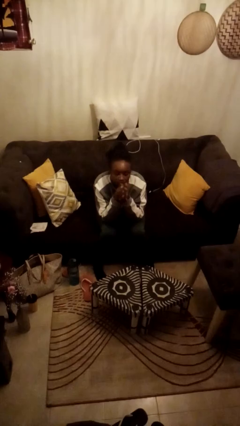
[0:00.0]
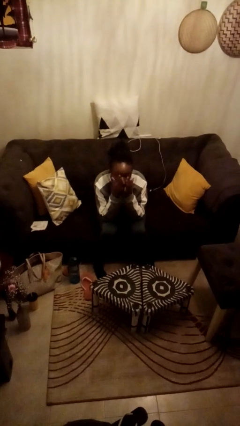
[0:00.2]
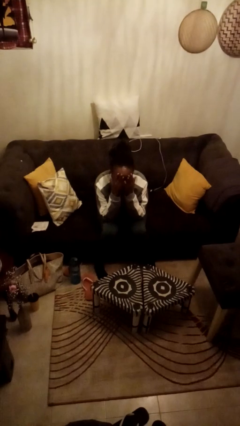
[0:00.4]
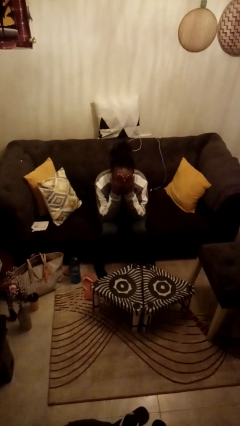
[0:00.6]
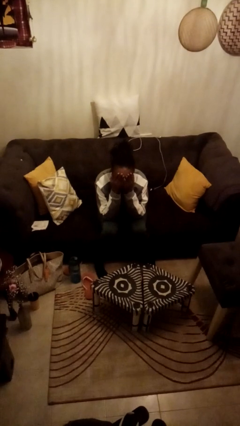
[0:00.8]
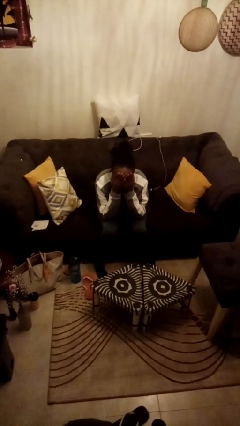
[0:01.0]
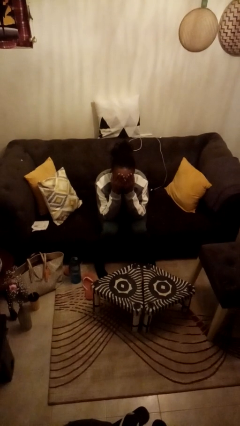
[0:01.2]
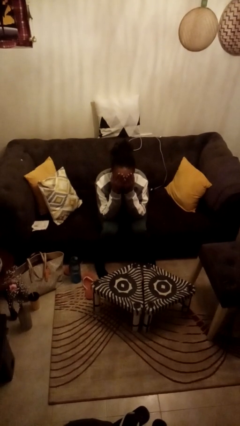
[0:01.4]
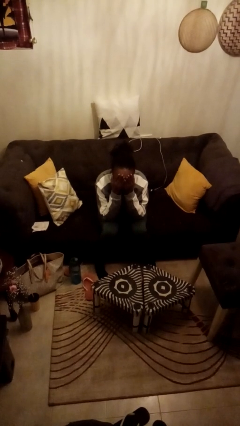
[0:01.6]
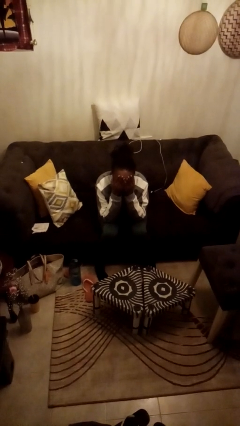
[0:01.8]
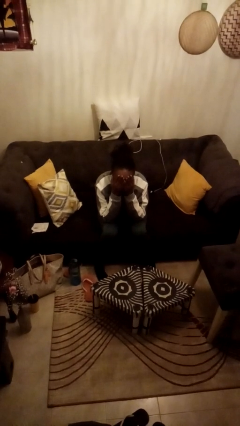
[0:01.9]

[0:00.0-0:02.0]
person covers face with hands

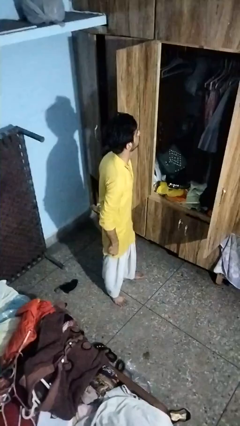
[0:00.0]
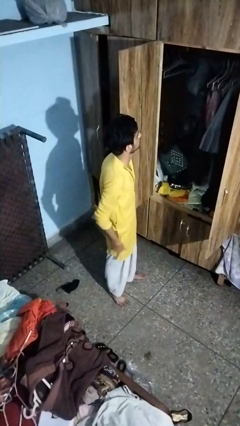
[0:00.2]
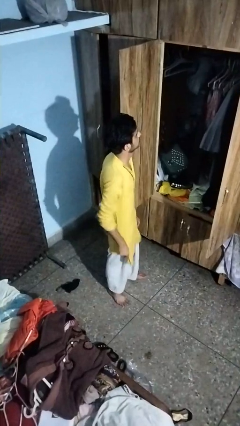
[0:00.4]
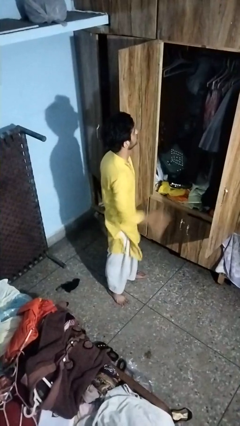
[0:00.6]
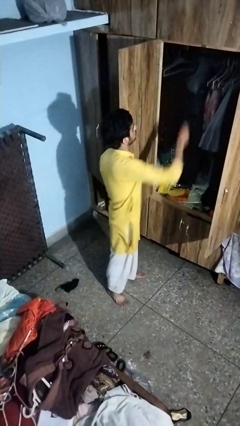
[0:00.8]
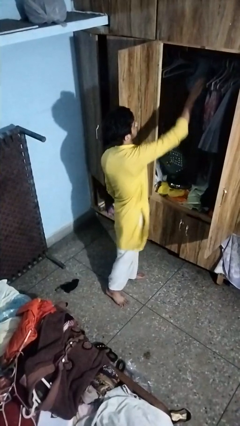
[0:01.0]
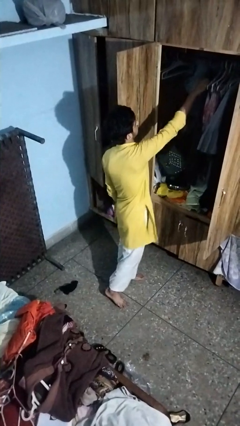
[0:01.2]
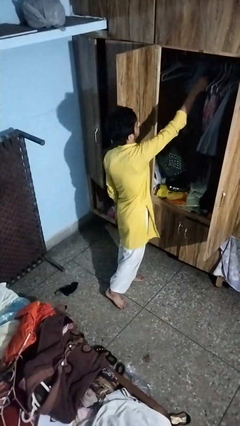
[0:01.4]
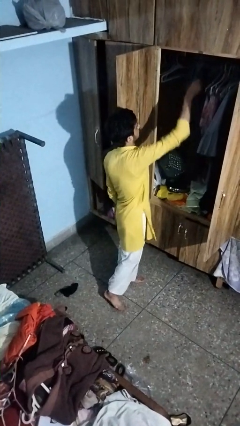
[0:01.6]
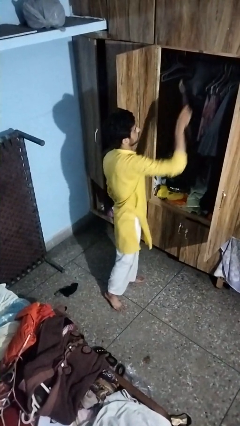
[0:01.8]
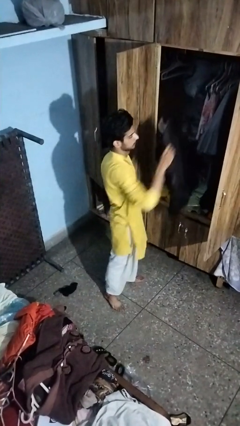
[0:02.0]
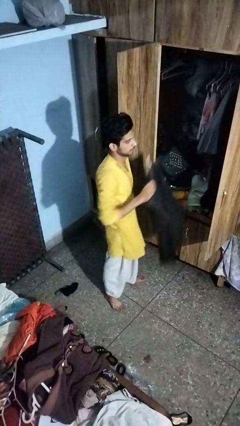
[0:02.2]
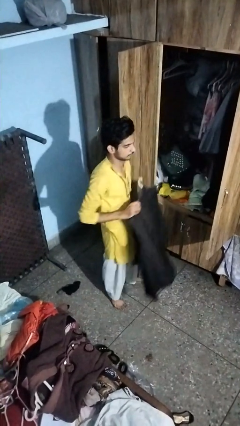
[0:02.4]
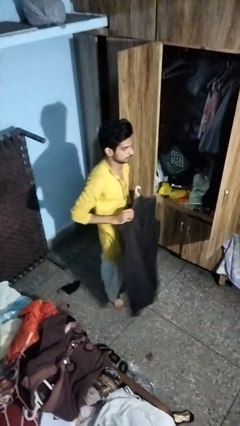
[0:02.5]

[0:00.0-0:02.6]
person takes clothes from closet

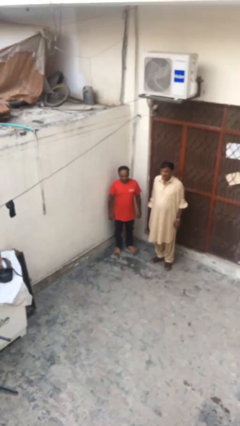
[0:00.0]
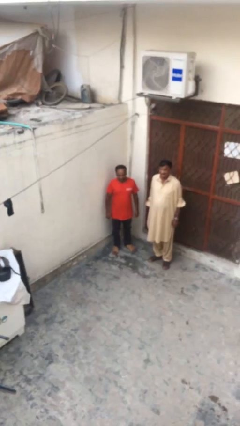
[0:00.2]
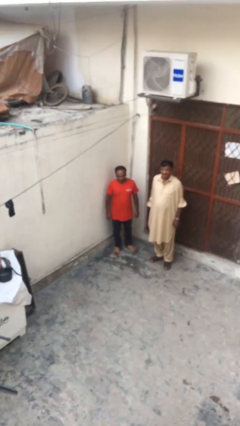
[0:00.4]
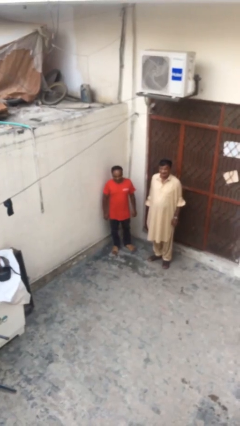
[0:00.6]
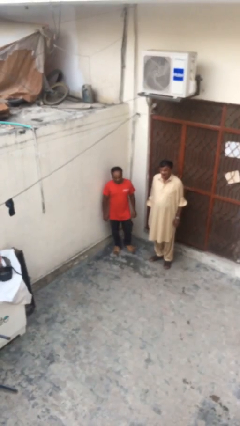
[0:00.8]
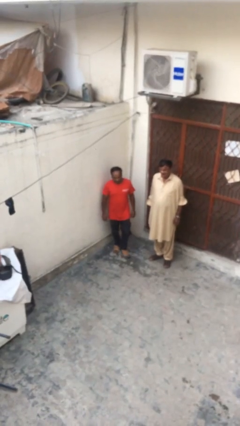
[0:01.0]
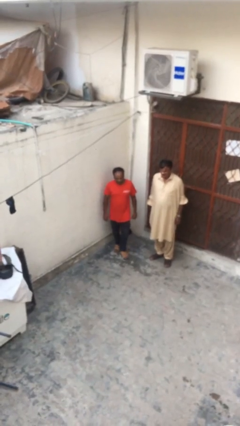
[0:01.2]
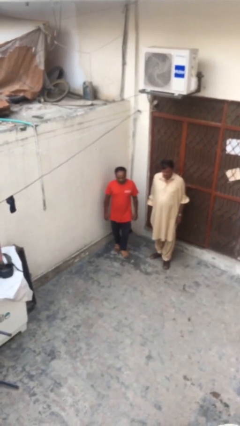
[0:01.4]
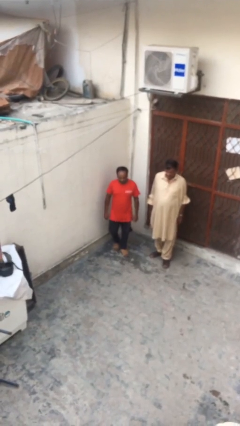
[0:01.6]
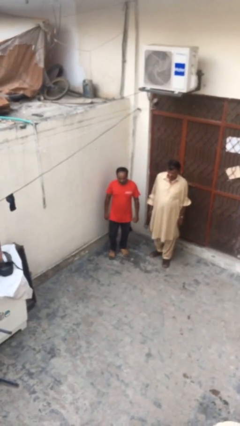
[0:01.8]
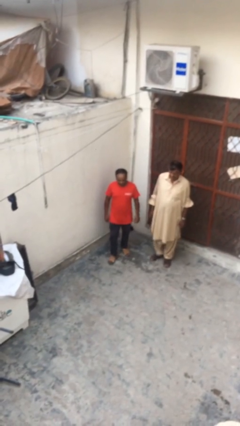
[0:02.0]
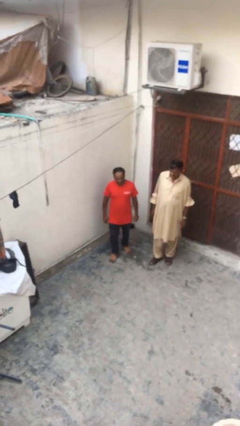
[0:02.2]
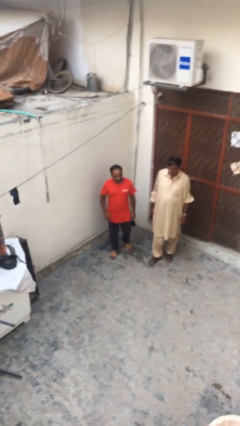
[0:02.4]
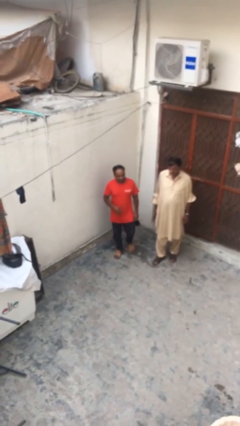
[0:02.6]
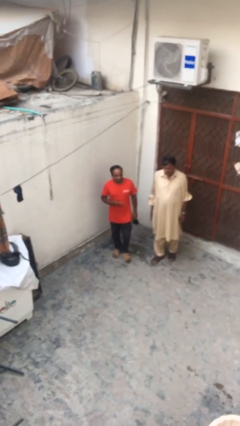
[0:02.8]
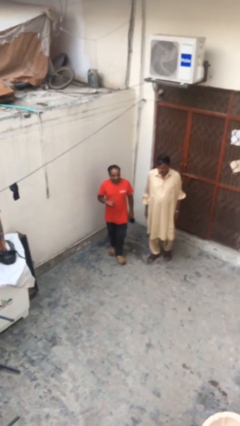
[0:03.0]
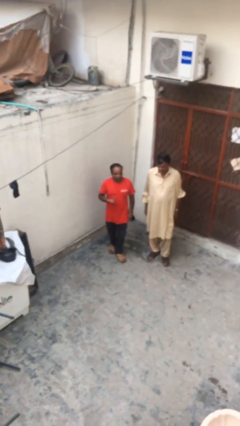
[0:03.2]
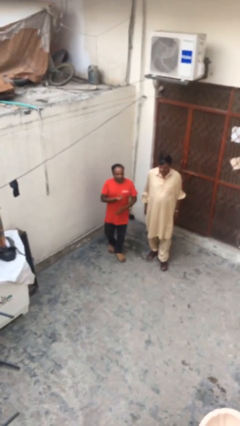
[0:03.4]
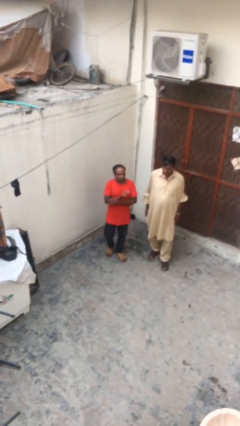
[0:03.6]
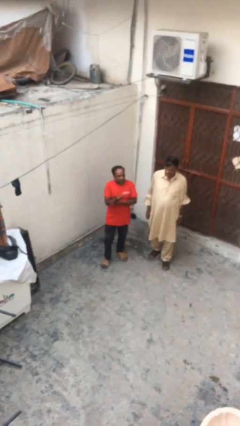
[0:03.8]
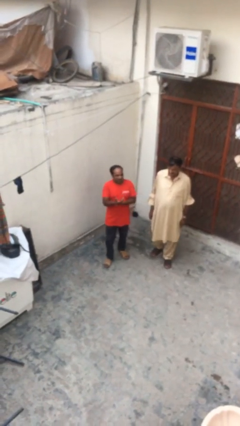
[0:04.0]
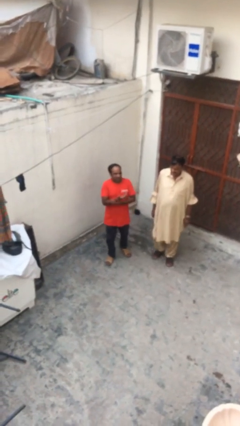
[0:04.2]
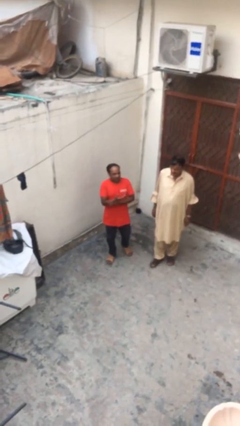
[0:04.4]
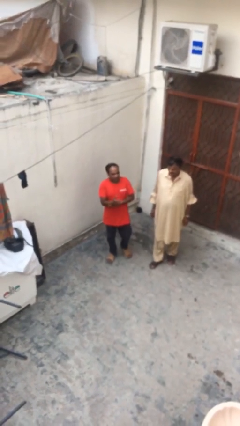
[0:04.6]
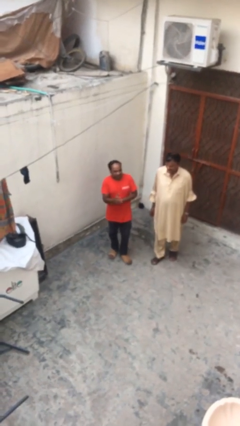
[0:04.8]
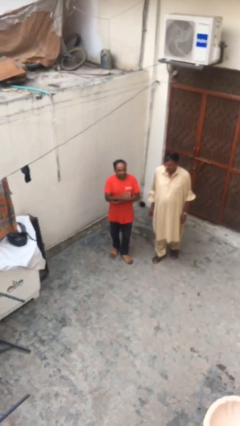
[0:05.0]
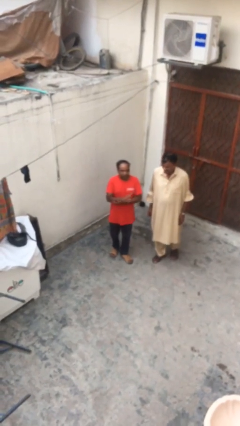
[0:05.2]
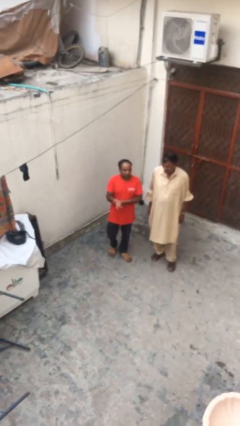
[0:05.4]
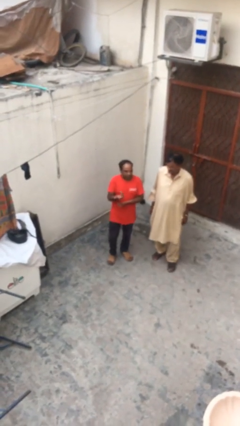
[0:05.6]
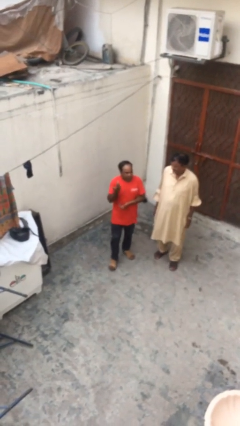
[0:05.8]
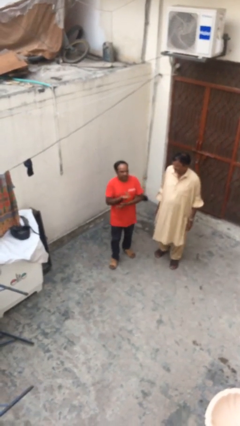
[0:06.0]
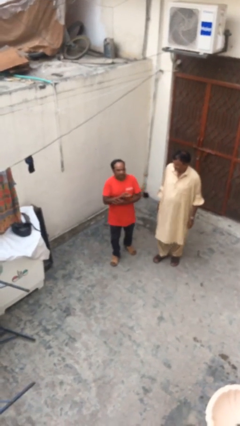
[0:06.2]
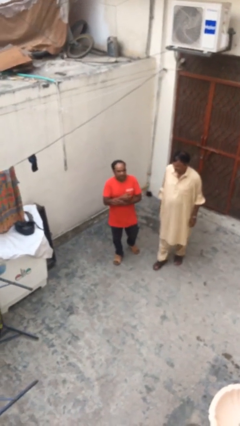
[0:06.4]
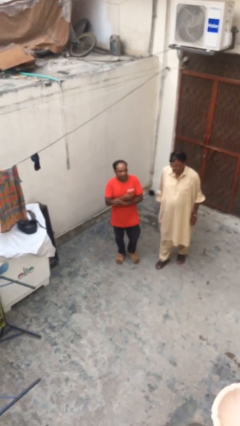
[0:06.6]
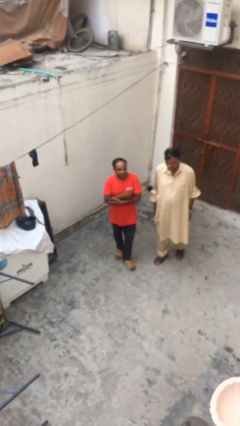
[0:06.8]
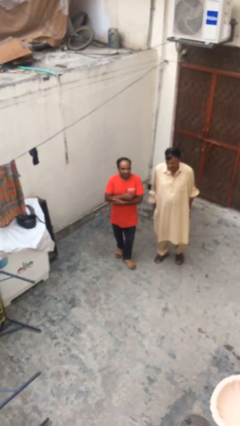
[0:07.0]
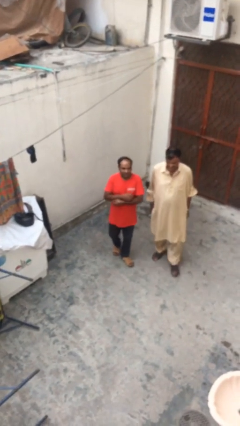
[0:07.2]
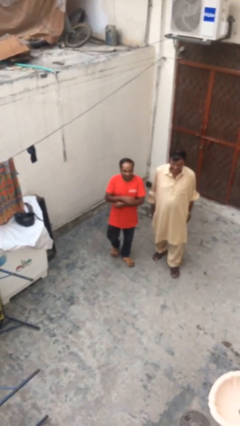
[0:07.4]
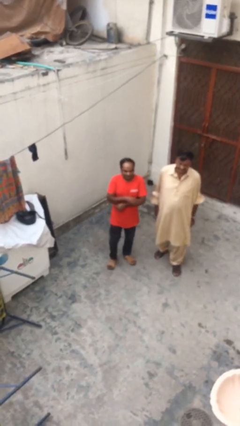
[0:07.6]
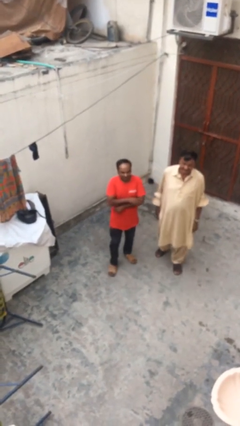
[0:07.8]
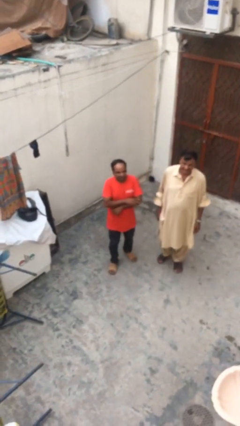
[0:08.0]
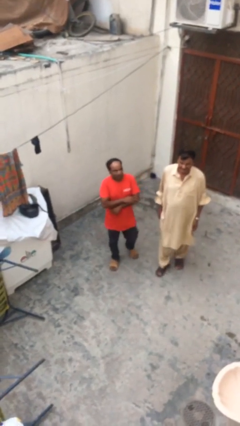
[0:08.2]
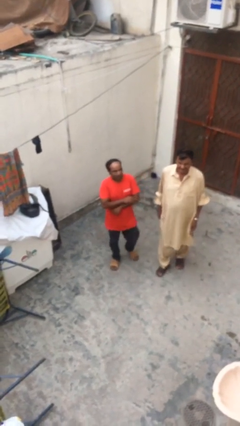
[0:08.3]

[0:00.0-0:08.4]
person talks to person

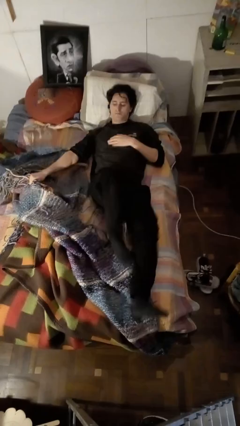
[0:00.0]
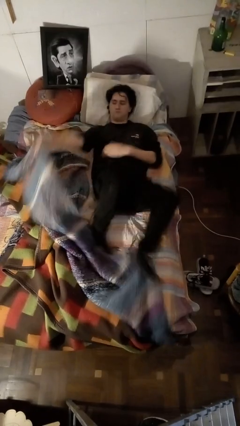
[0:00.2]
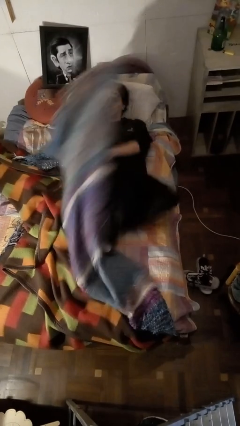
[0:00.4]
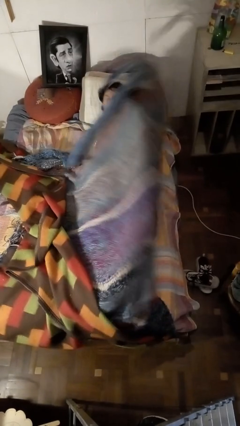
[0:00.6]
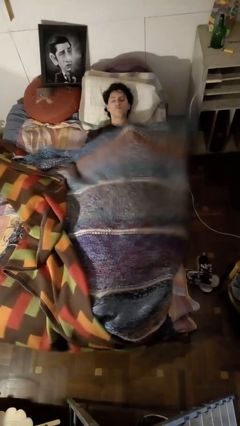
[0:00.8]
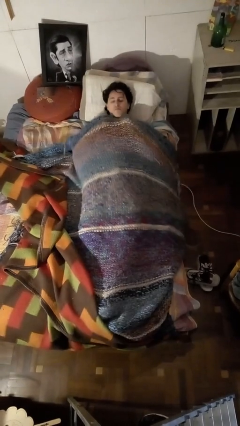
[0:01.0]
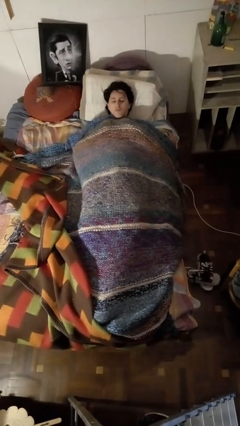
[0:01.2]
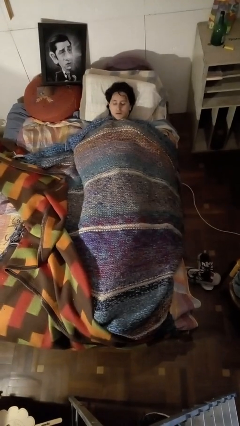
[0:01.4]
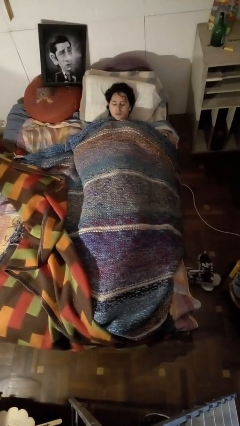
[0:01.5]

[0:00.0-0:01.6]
person covers with bedsheets

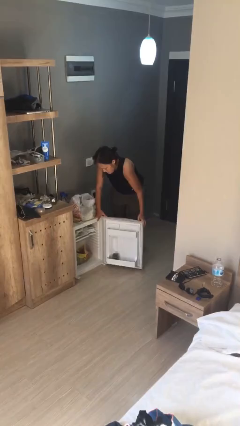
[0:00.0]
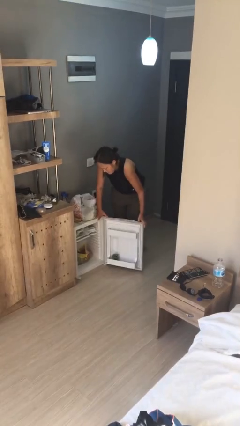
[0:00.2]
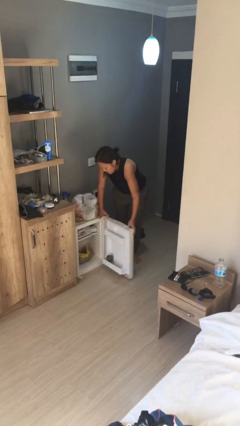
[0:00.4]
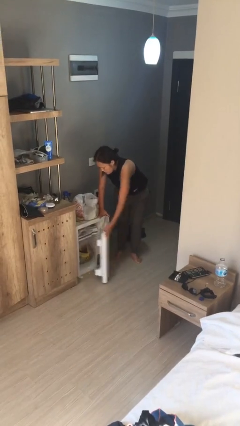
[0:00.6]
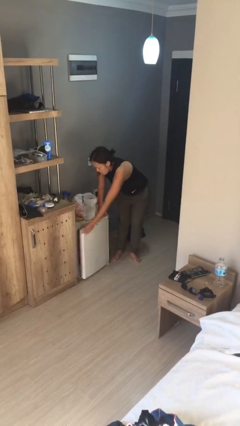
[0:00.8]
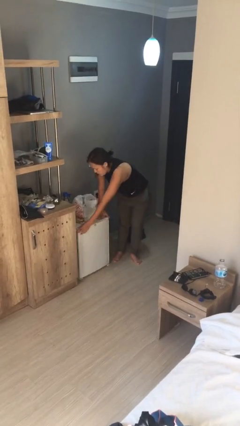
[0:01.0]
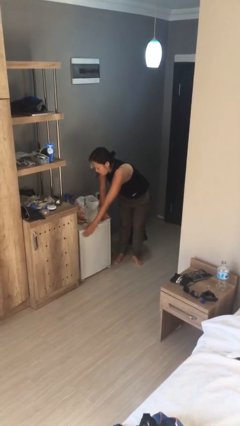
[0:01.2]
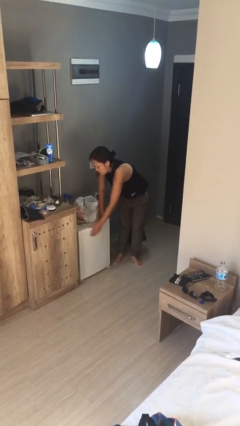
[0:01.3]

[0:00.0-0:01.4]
person closes refrigerator

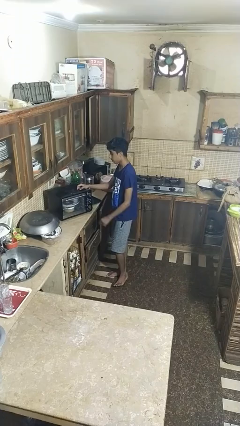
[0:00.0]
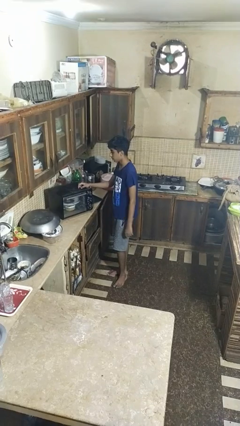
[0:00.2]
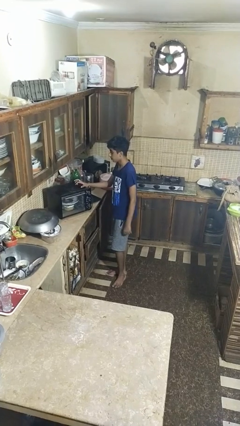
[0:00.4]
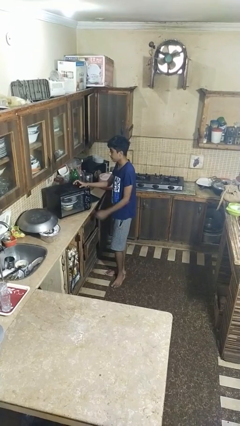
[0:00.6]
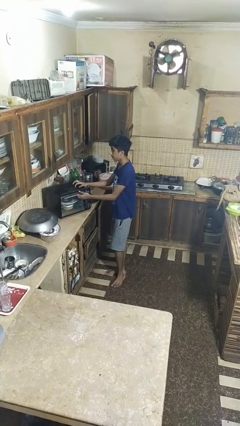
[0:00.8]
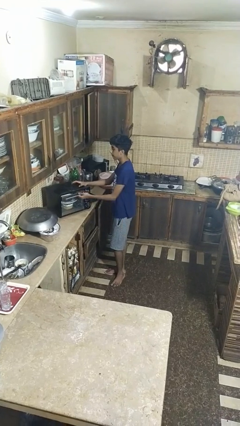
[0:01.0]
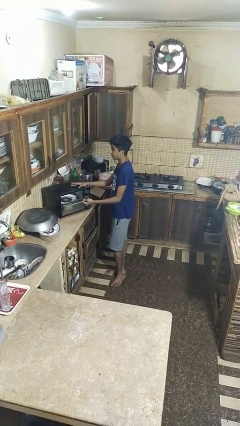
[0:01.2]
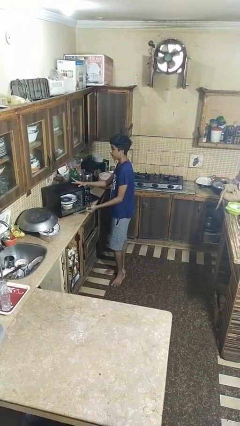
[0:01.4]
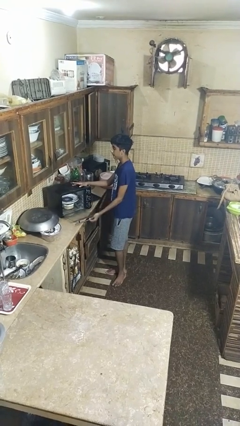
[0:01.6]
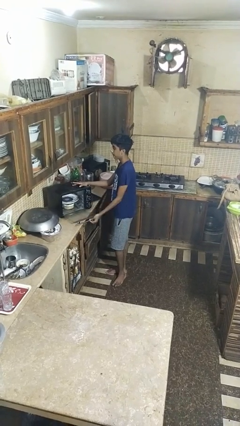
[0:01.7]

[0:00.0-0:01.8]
person opens dishwasher
